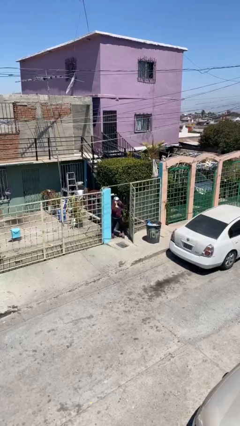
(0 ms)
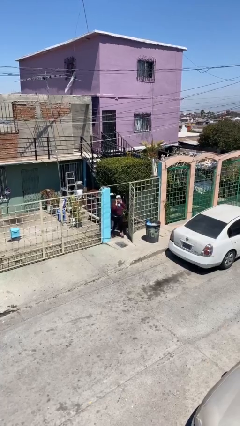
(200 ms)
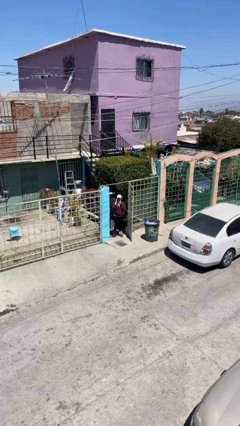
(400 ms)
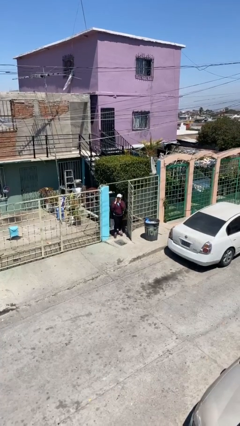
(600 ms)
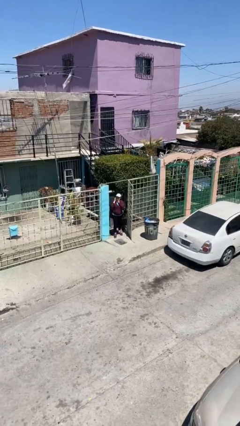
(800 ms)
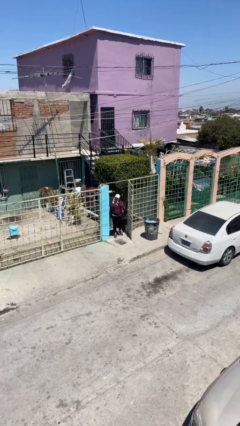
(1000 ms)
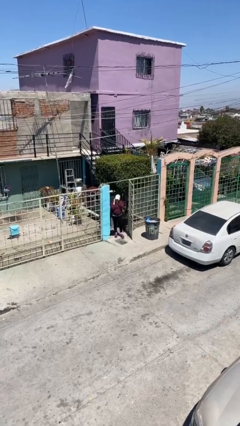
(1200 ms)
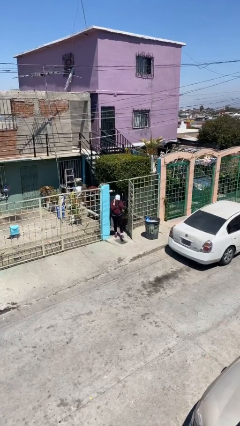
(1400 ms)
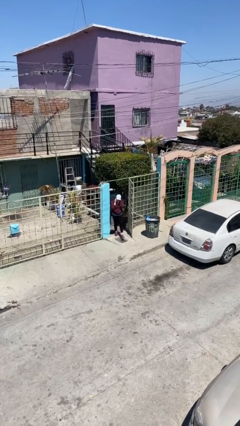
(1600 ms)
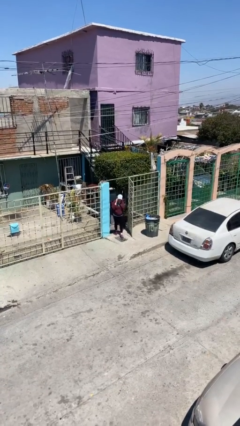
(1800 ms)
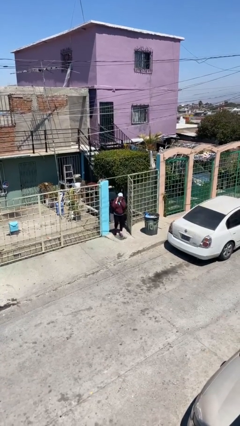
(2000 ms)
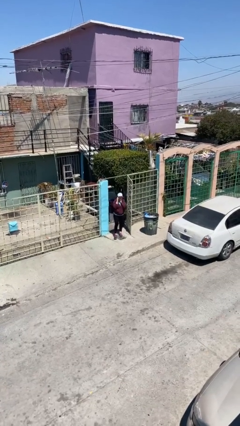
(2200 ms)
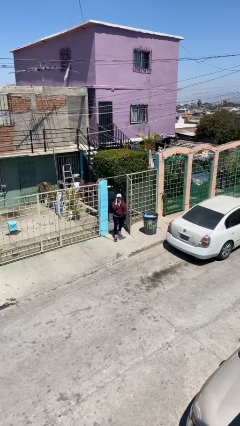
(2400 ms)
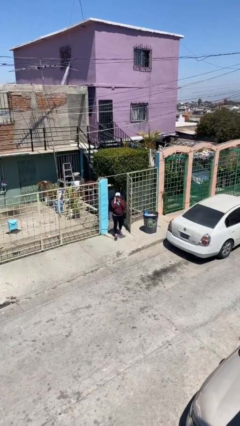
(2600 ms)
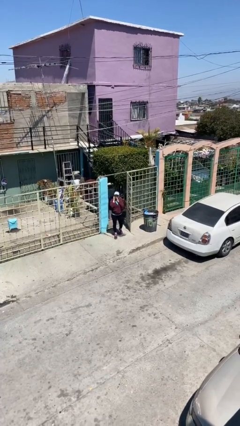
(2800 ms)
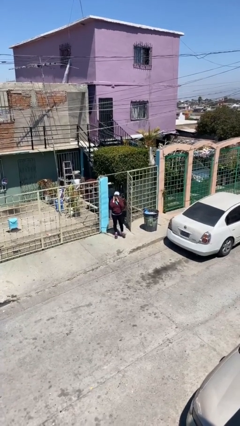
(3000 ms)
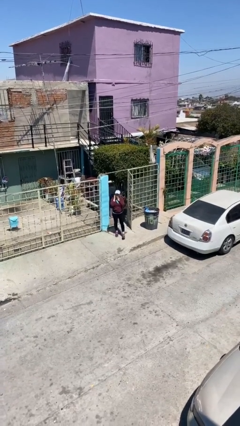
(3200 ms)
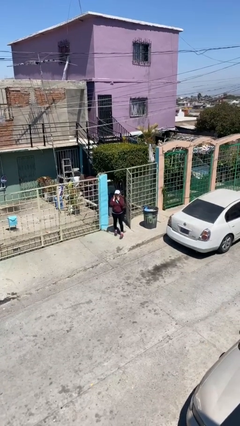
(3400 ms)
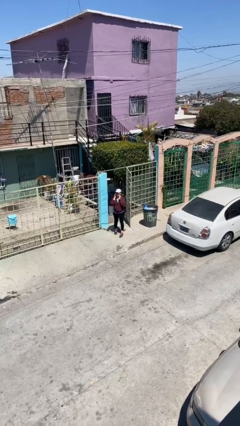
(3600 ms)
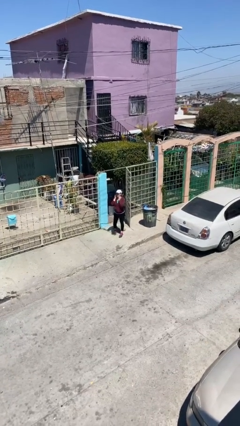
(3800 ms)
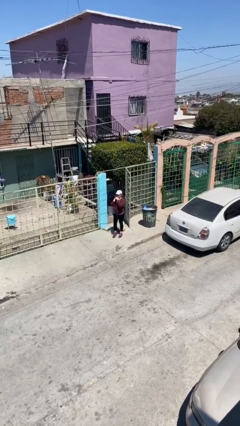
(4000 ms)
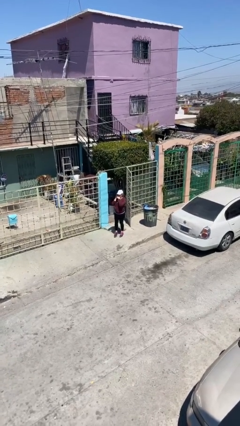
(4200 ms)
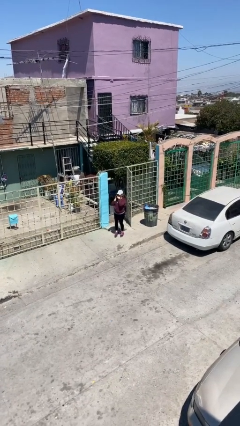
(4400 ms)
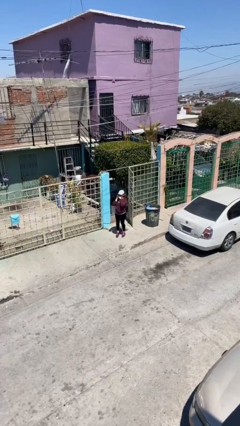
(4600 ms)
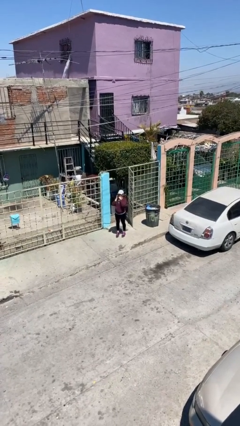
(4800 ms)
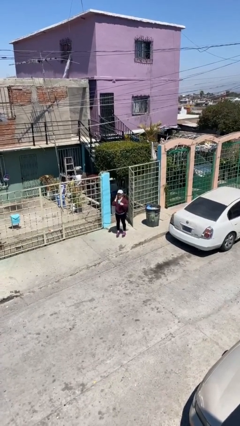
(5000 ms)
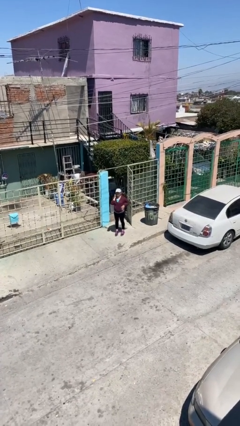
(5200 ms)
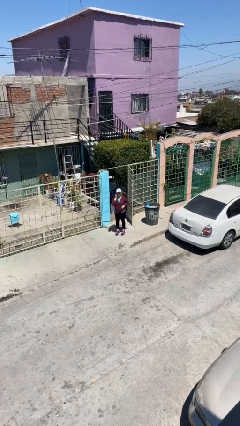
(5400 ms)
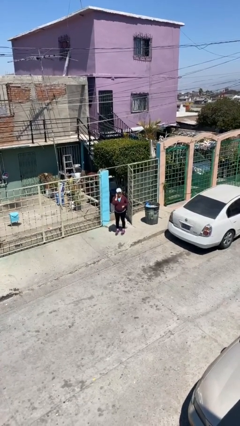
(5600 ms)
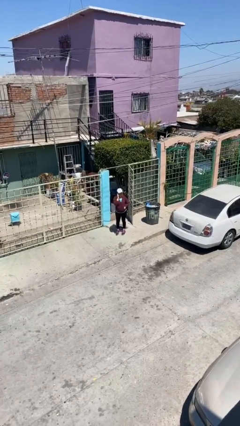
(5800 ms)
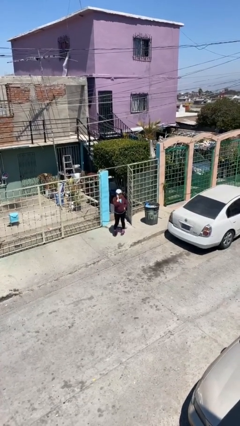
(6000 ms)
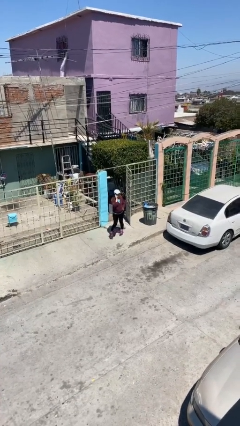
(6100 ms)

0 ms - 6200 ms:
person enters scene through structure

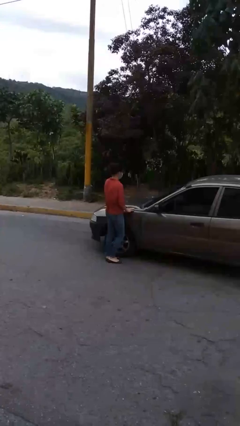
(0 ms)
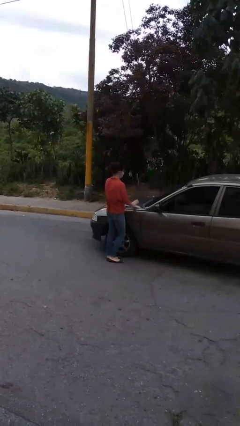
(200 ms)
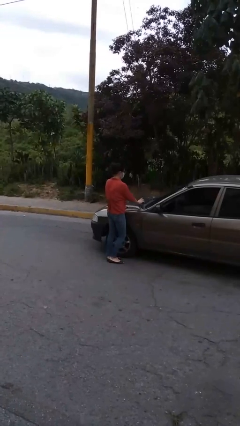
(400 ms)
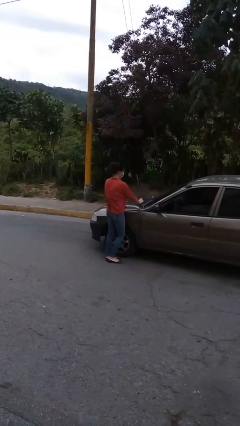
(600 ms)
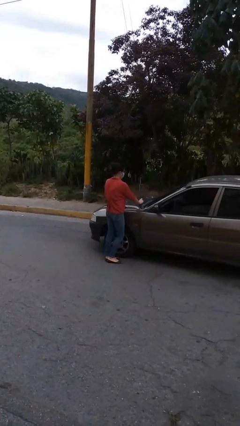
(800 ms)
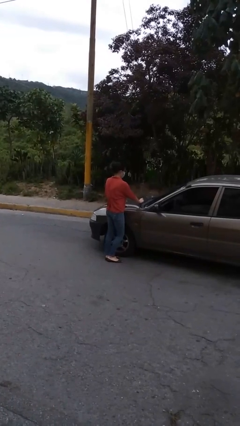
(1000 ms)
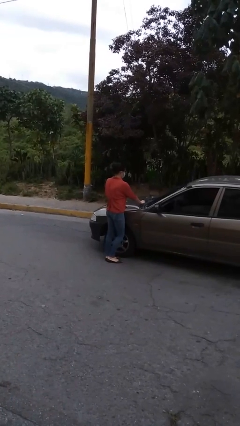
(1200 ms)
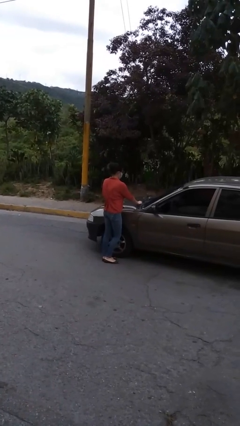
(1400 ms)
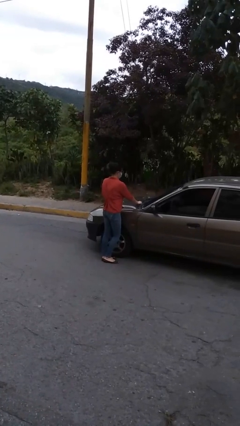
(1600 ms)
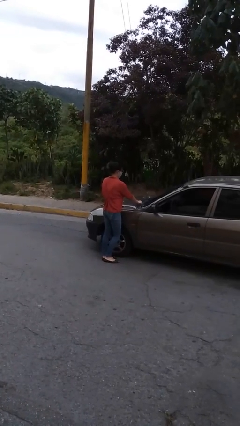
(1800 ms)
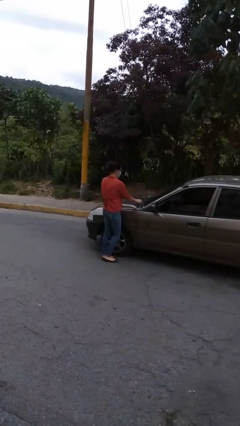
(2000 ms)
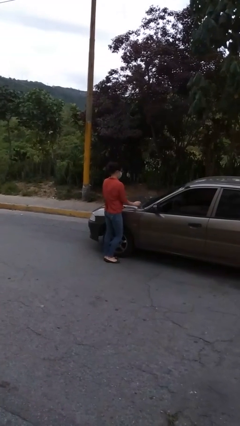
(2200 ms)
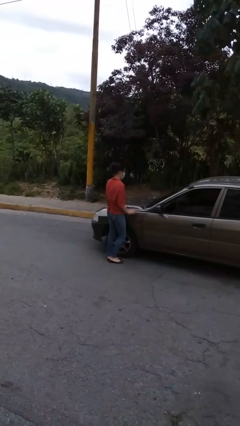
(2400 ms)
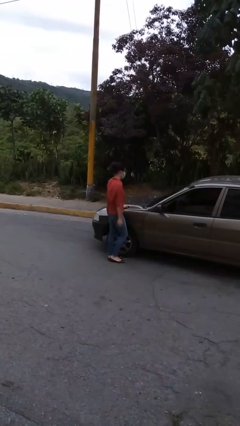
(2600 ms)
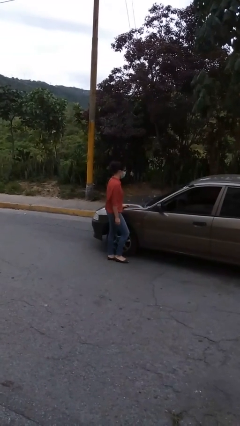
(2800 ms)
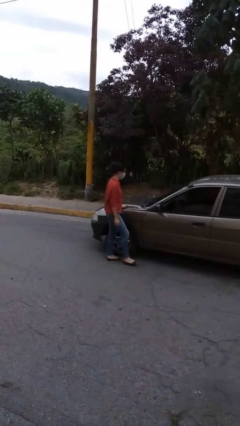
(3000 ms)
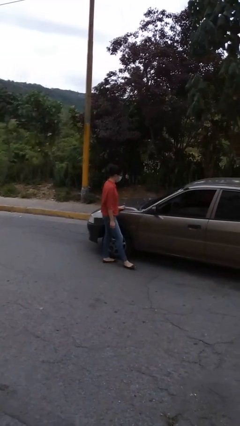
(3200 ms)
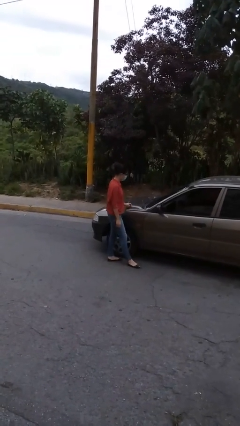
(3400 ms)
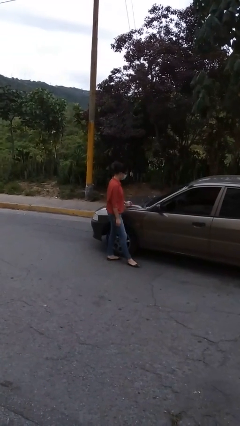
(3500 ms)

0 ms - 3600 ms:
person flips down car wipers

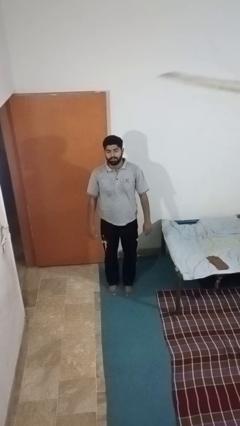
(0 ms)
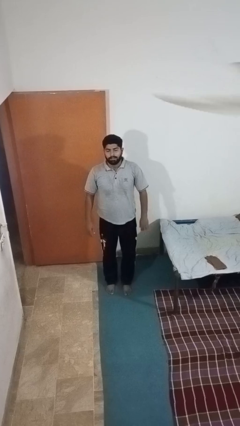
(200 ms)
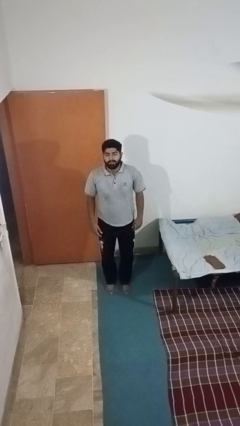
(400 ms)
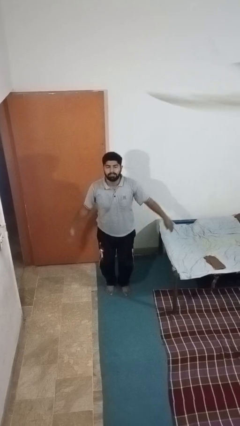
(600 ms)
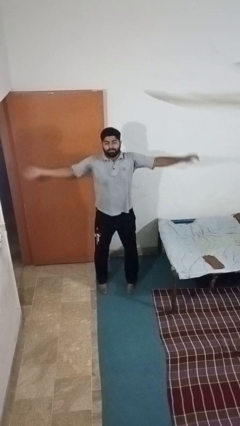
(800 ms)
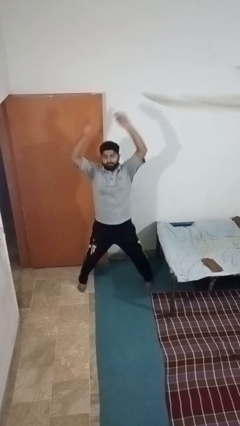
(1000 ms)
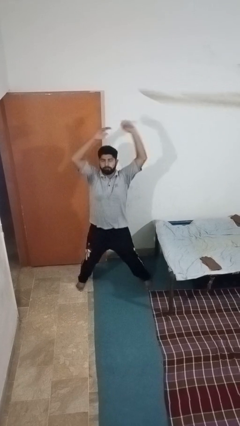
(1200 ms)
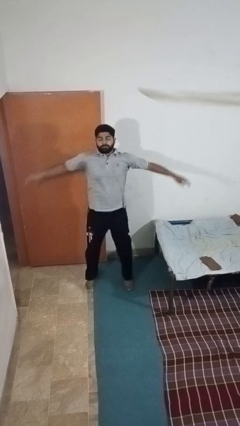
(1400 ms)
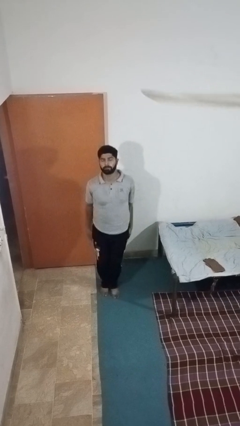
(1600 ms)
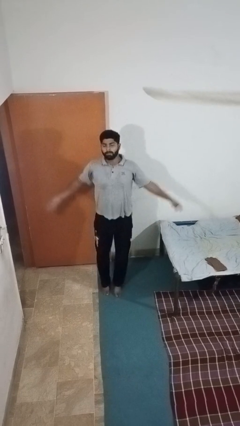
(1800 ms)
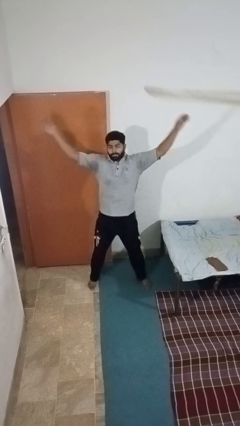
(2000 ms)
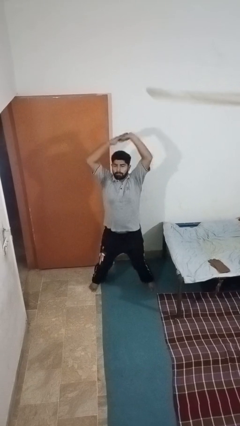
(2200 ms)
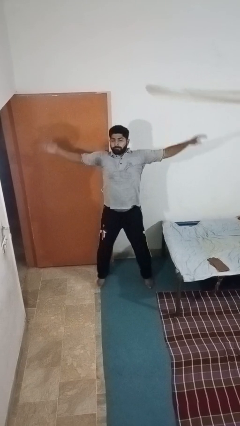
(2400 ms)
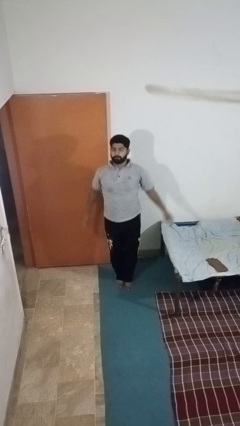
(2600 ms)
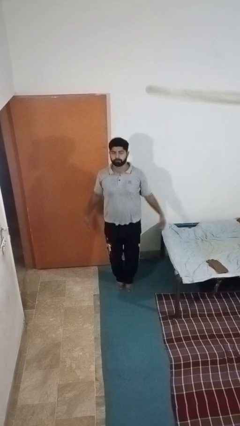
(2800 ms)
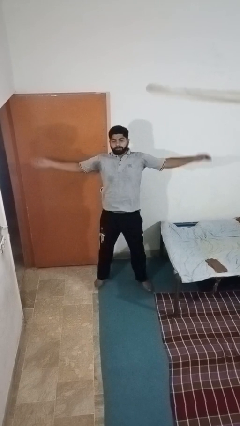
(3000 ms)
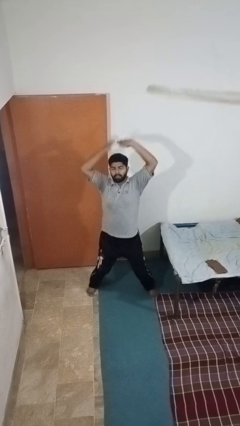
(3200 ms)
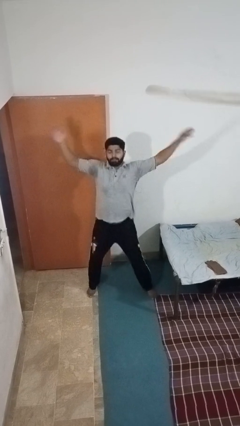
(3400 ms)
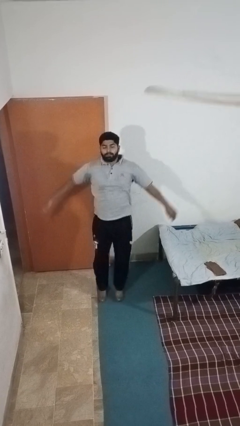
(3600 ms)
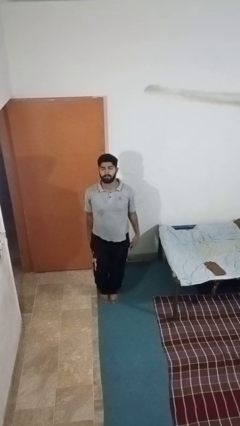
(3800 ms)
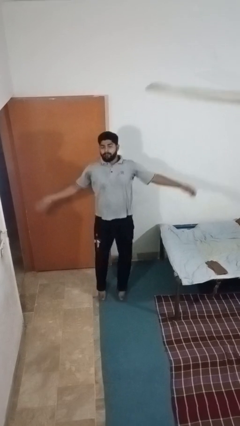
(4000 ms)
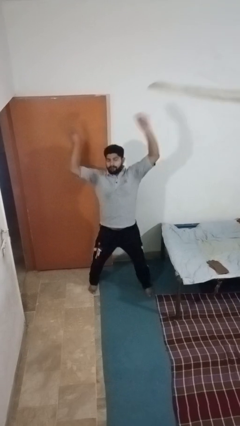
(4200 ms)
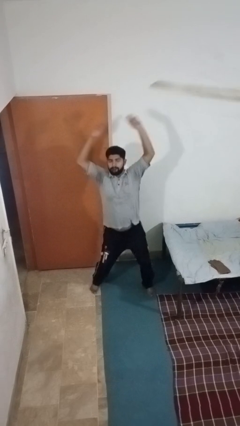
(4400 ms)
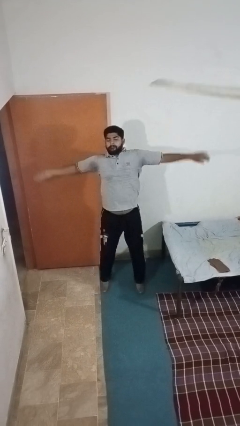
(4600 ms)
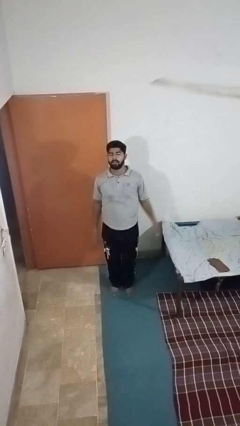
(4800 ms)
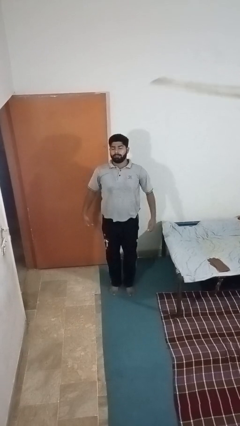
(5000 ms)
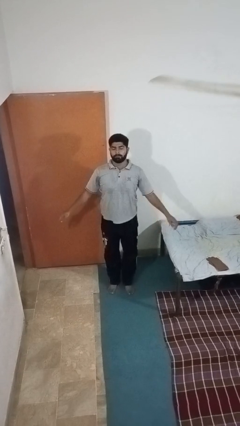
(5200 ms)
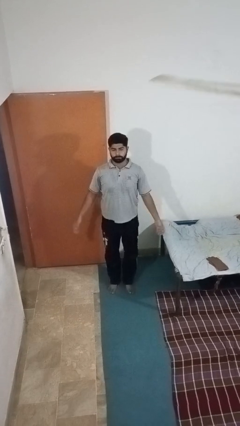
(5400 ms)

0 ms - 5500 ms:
person exercises with jumping jacks

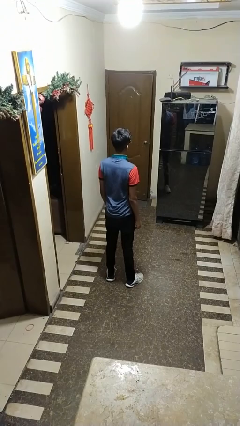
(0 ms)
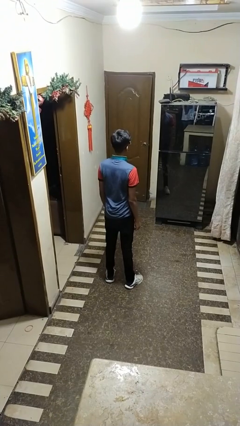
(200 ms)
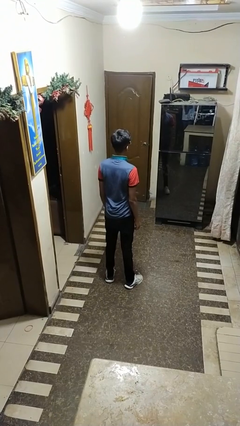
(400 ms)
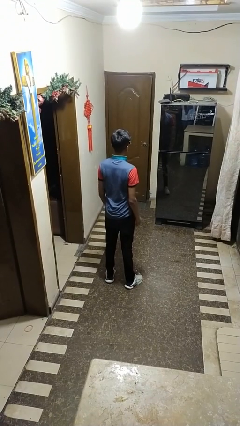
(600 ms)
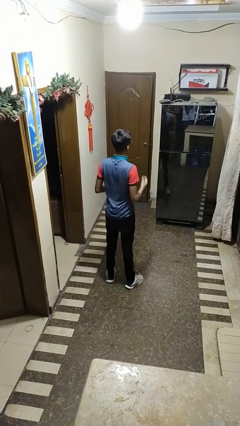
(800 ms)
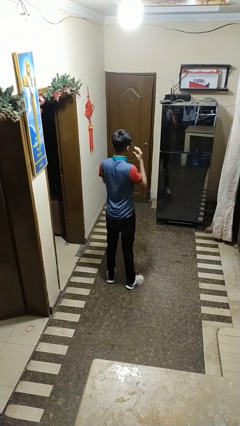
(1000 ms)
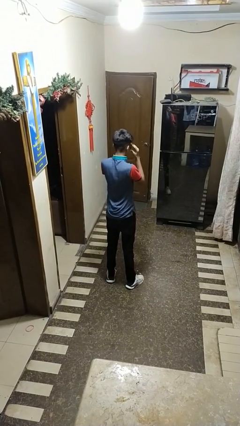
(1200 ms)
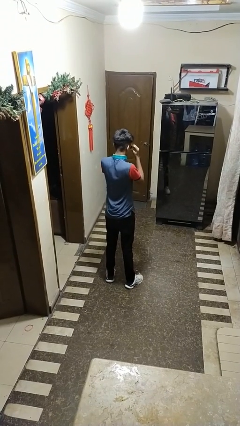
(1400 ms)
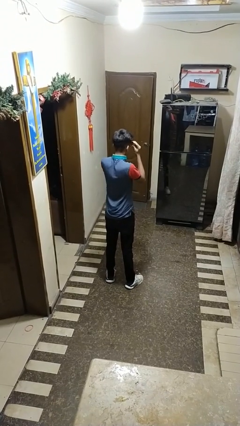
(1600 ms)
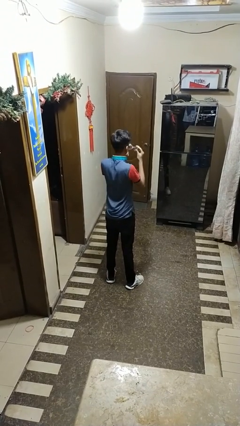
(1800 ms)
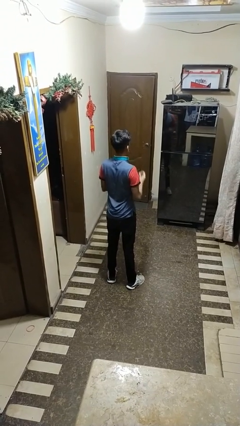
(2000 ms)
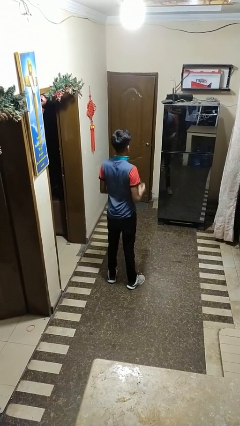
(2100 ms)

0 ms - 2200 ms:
person takes off sunglasses

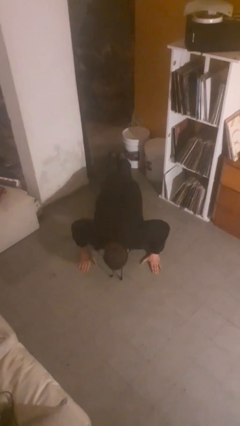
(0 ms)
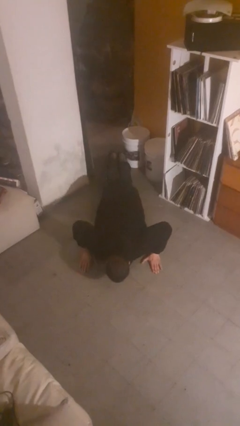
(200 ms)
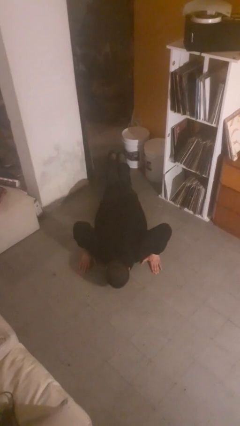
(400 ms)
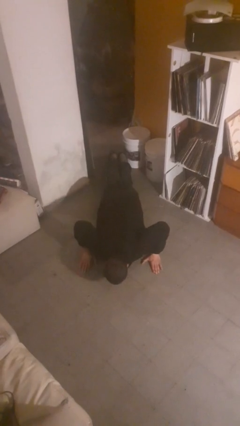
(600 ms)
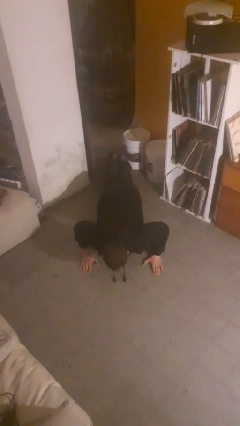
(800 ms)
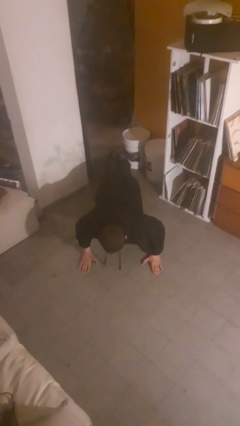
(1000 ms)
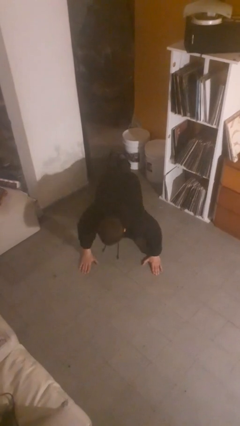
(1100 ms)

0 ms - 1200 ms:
person exercises with pushup
